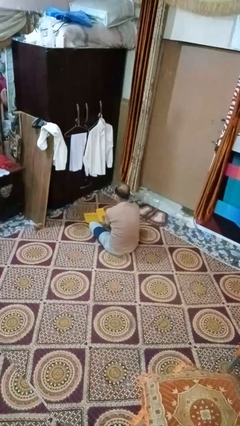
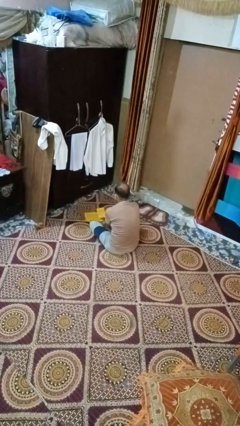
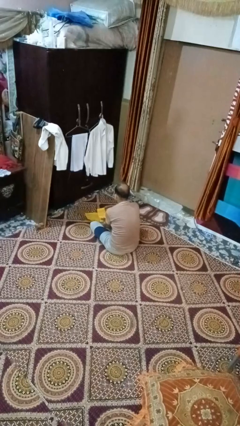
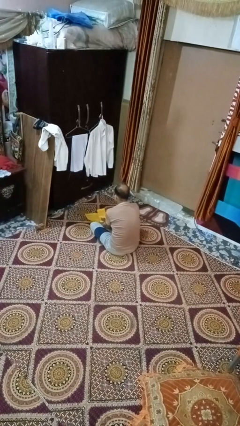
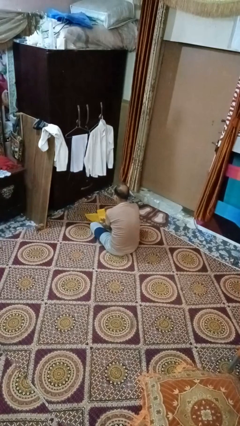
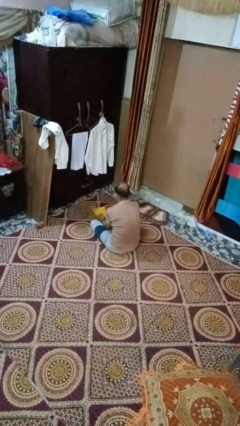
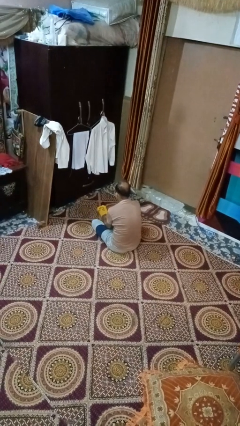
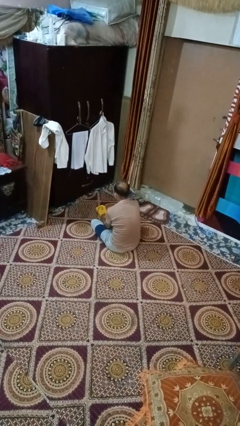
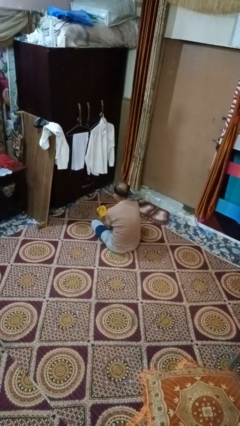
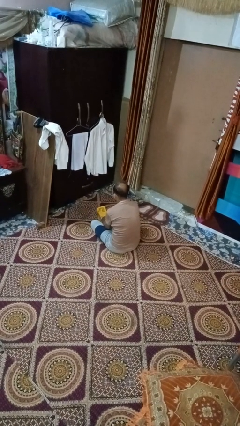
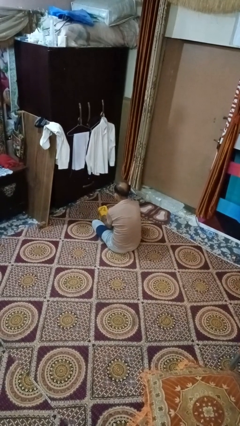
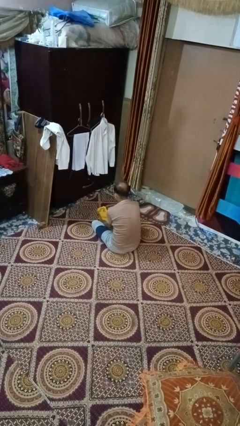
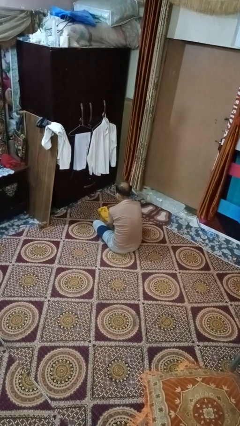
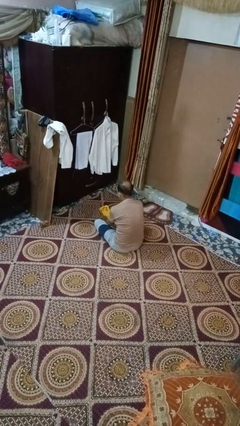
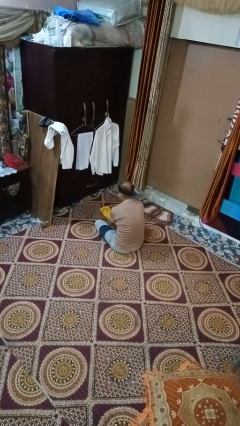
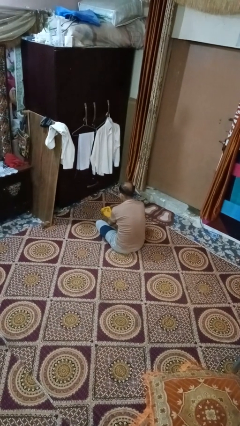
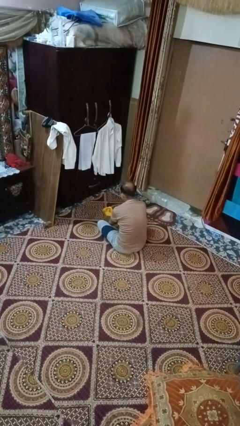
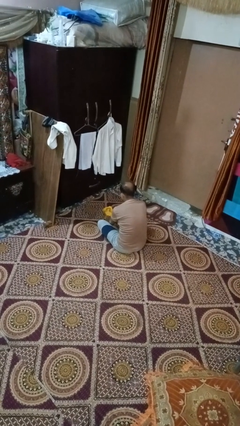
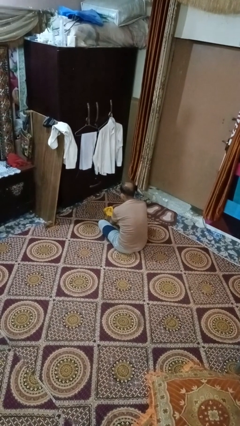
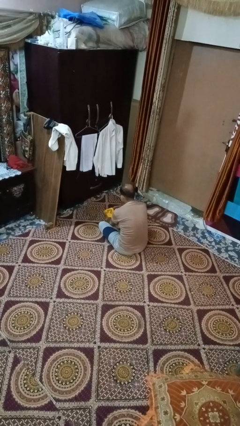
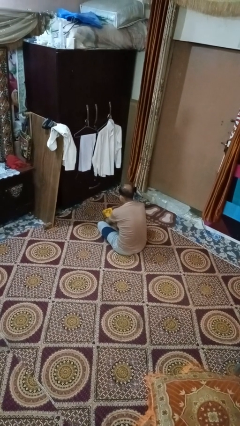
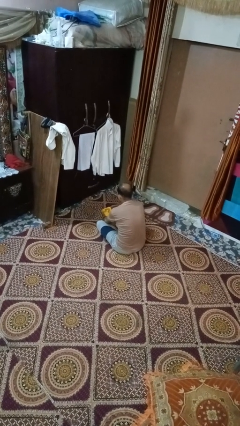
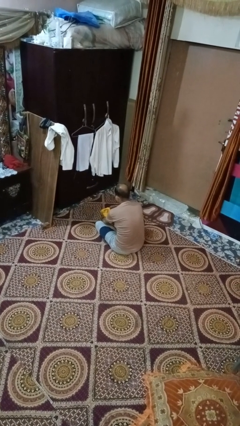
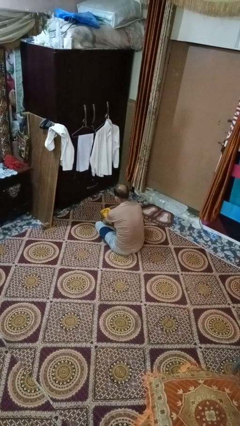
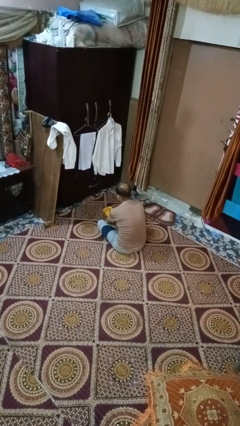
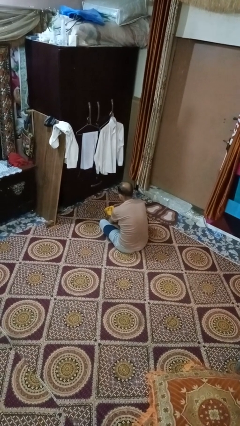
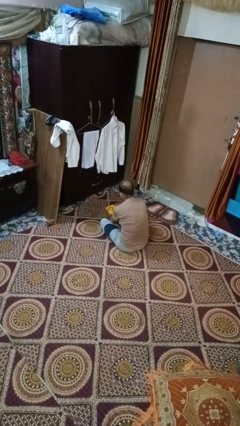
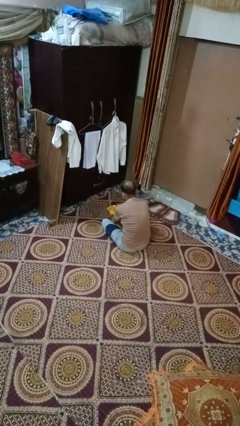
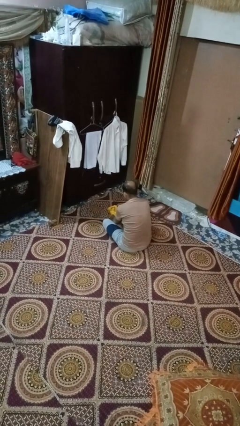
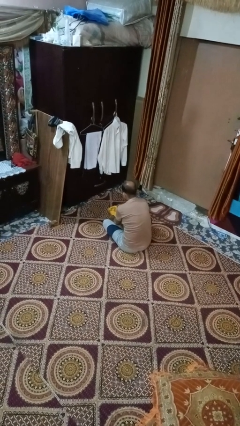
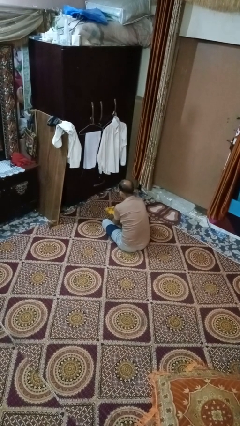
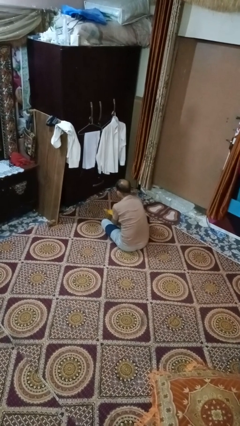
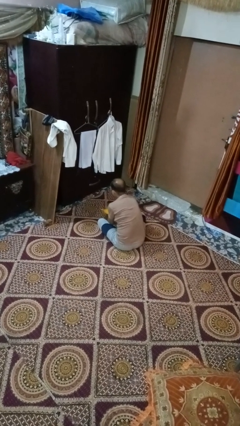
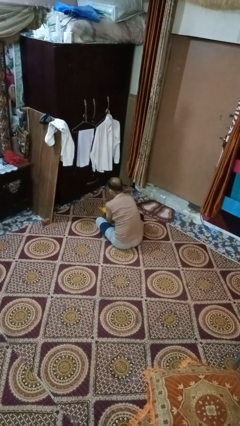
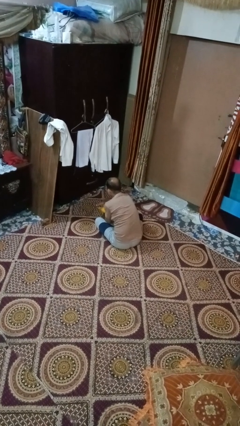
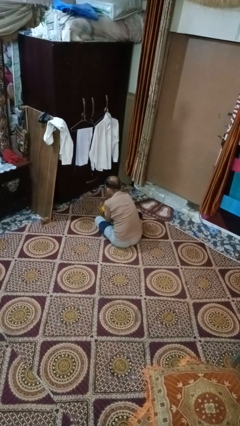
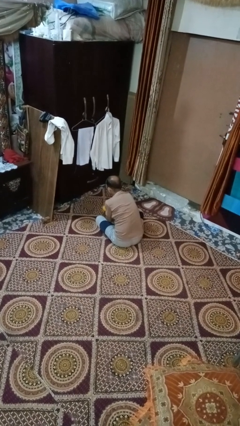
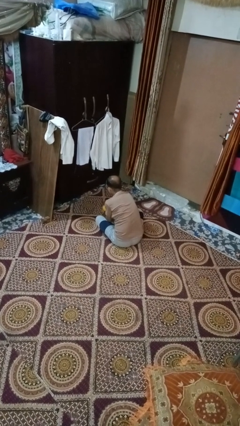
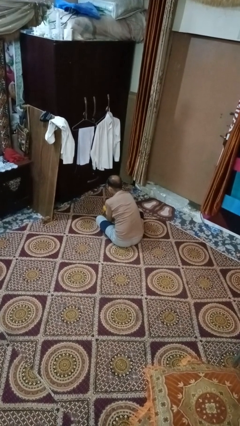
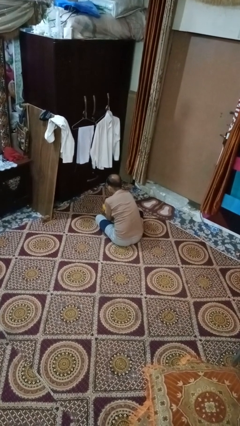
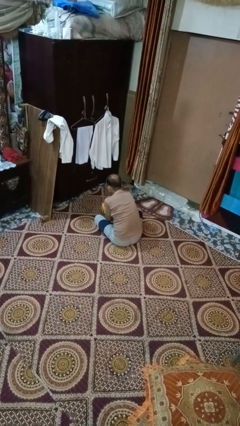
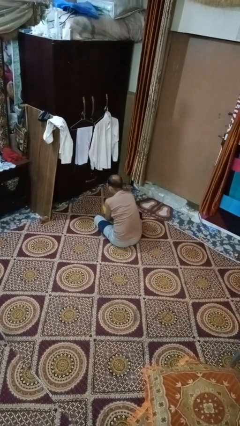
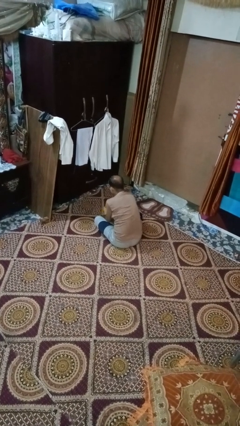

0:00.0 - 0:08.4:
person wraps box

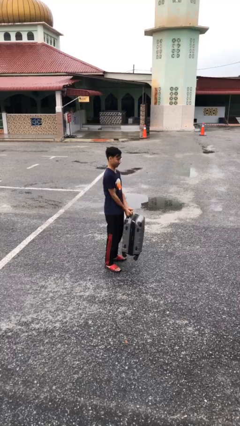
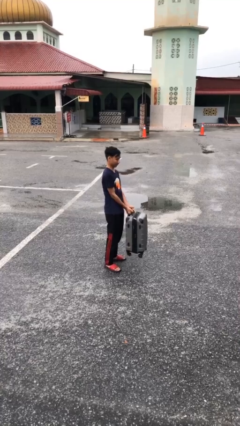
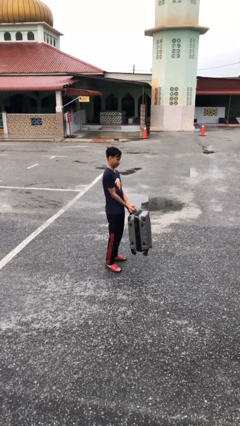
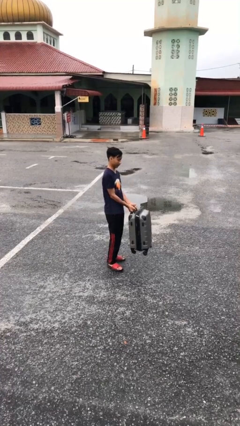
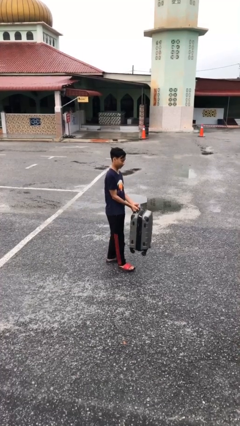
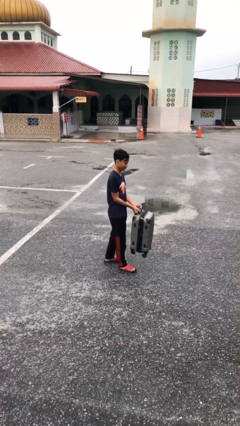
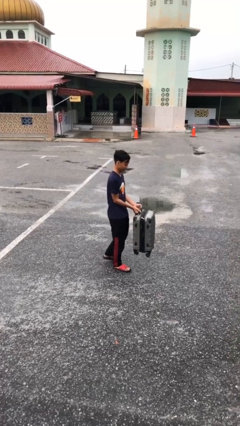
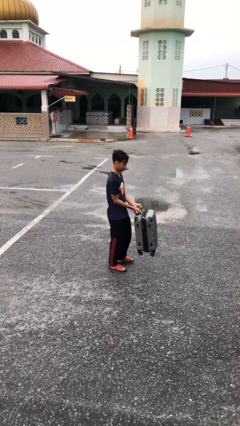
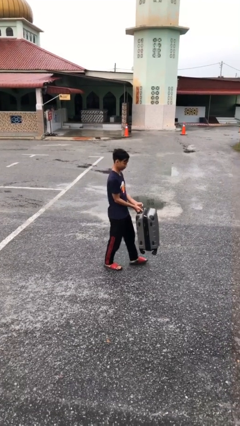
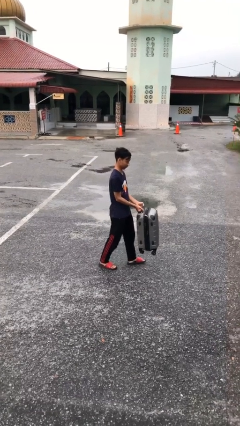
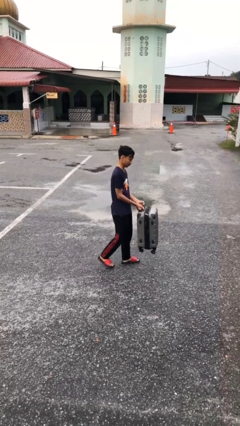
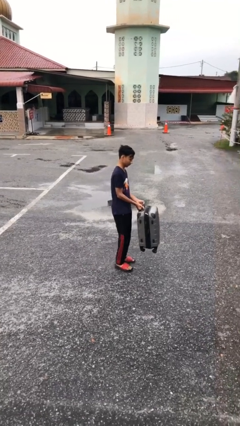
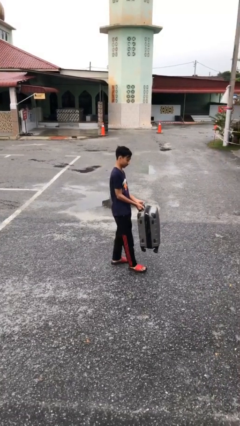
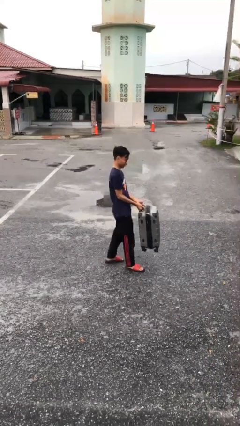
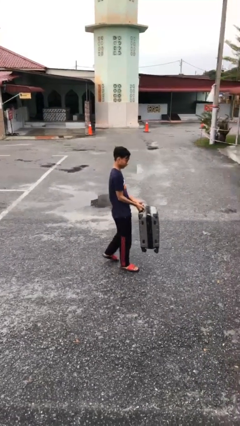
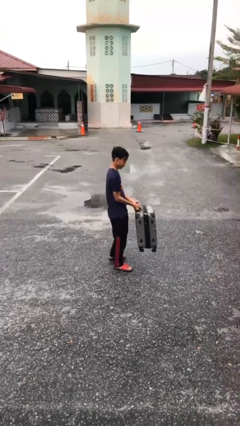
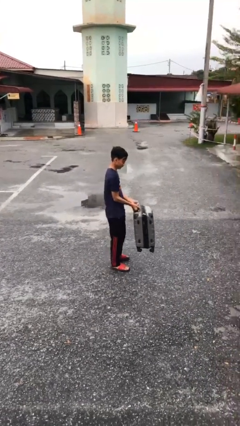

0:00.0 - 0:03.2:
person carries heavy object

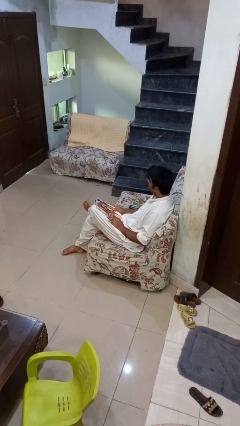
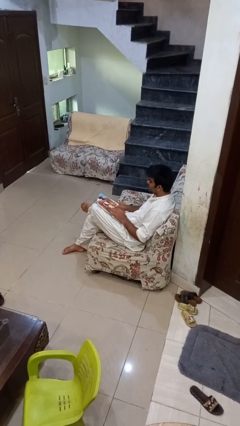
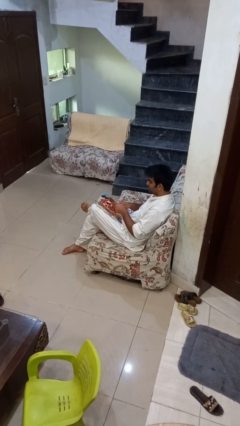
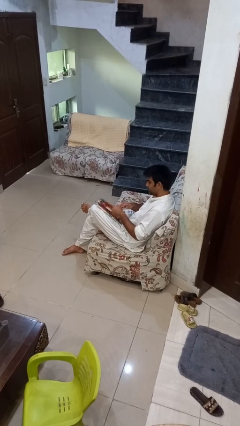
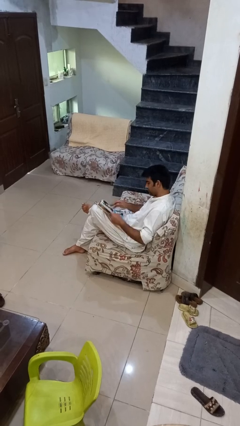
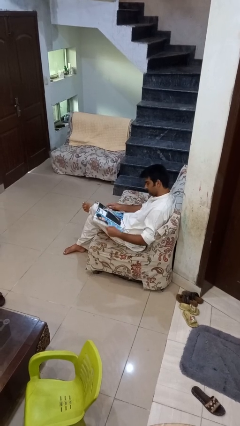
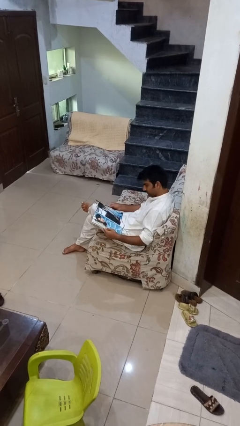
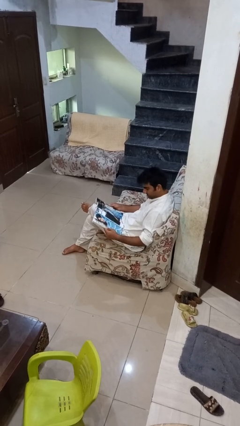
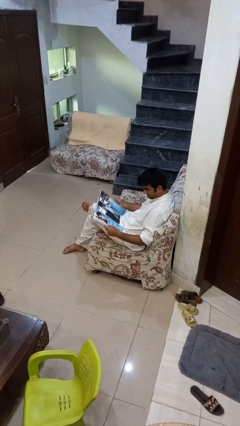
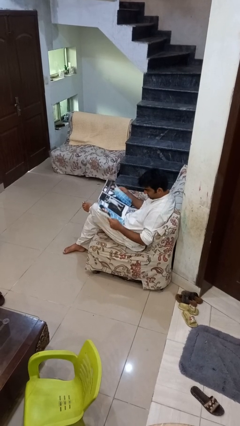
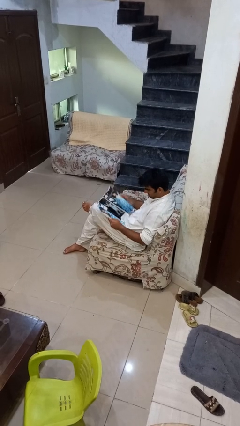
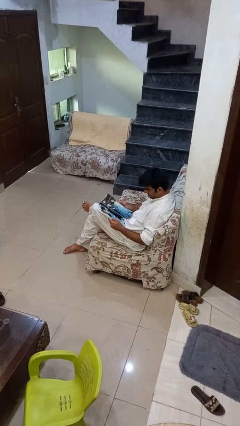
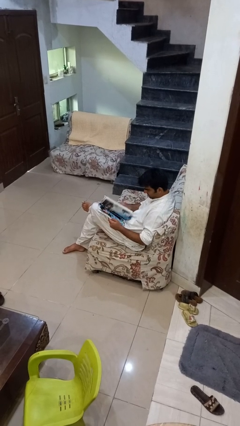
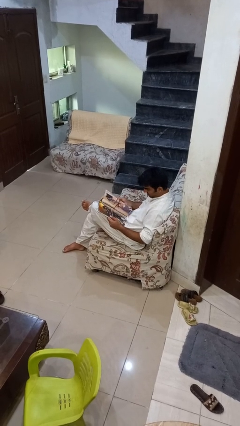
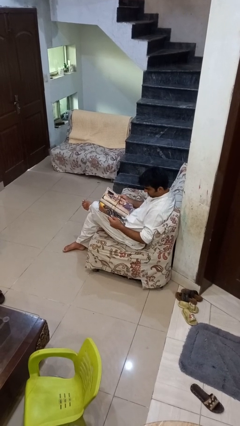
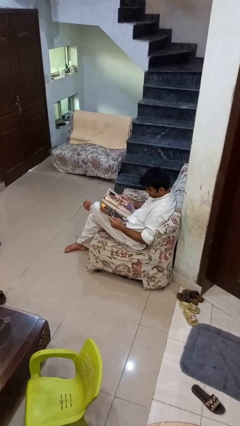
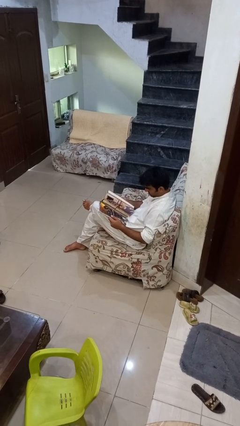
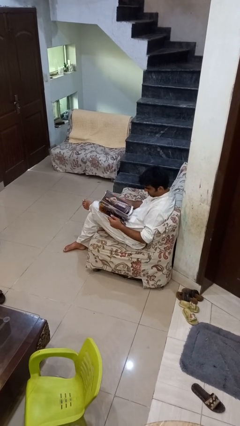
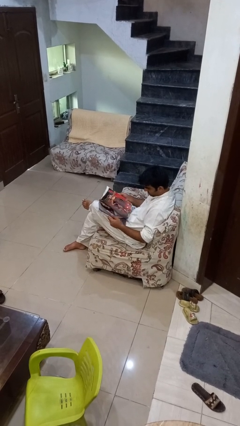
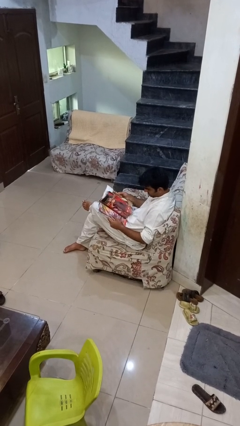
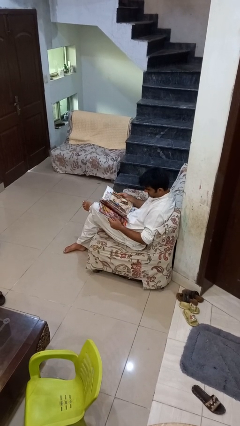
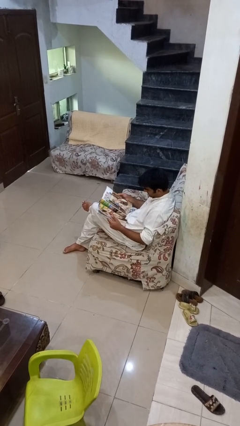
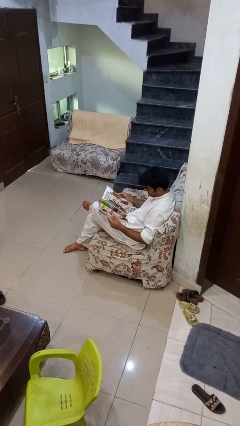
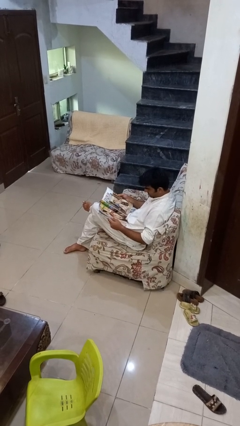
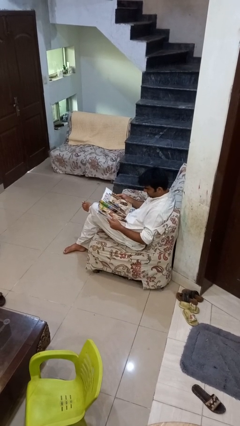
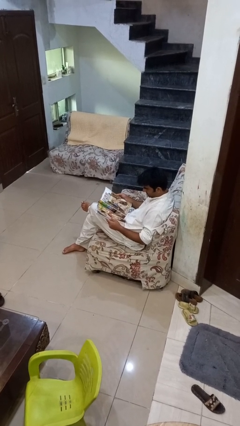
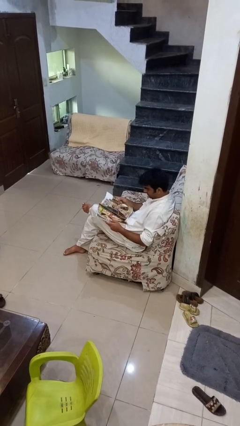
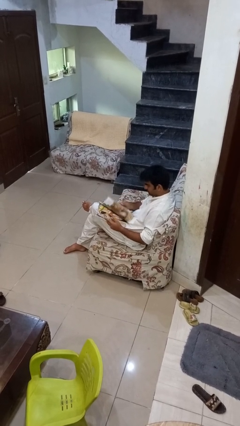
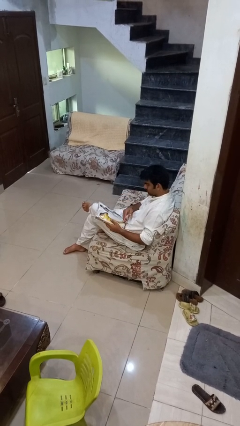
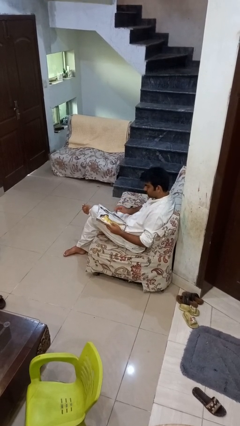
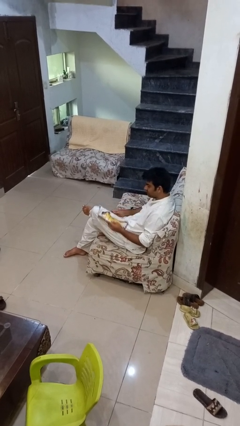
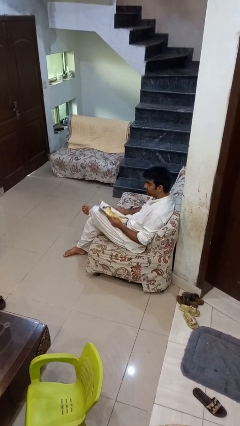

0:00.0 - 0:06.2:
person reads magazine

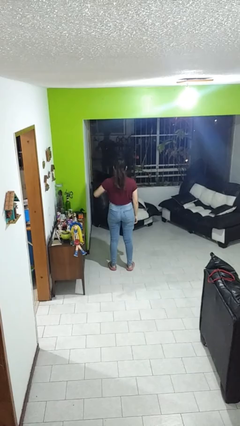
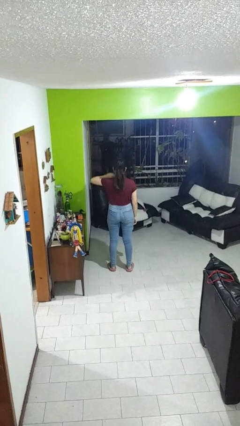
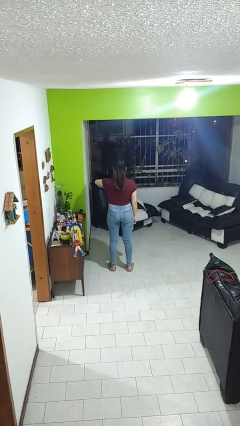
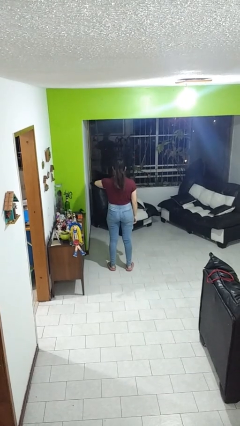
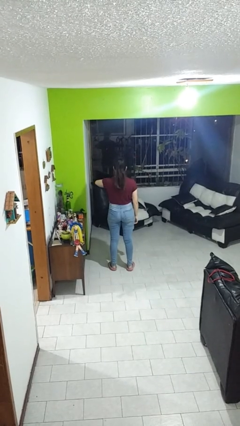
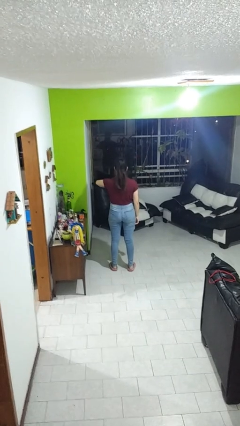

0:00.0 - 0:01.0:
person gestures thumbs down
